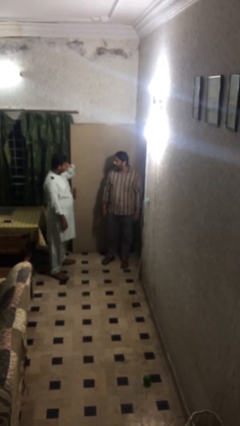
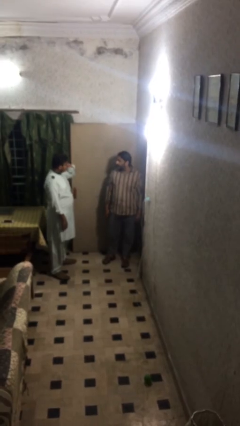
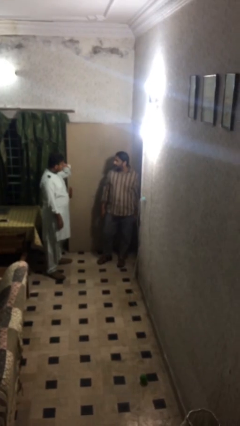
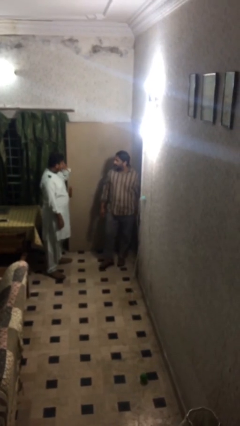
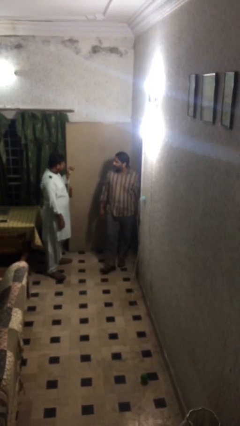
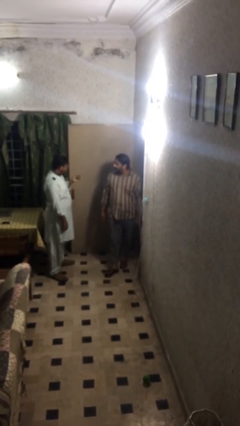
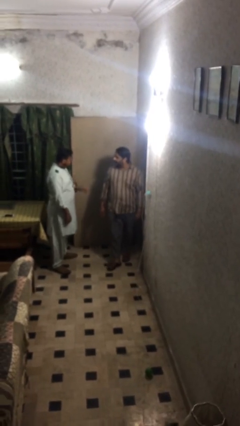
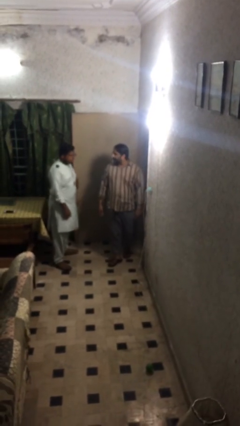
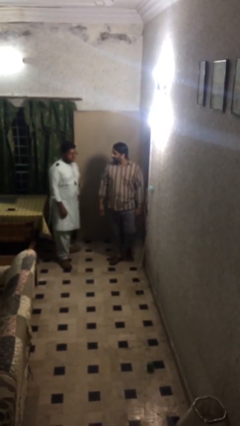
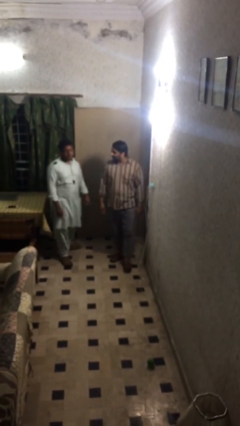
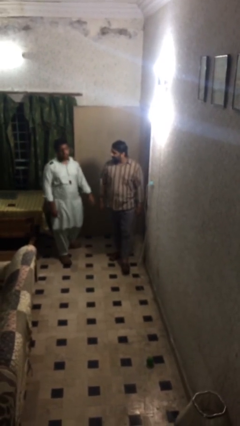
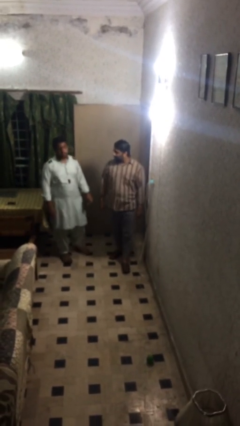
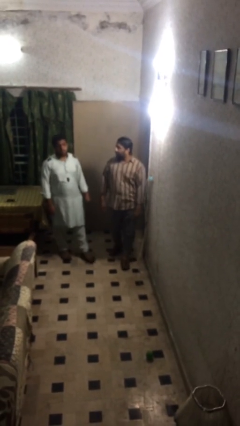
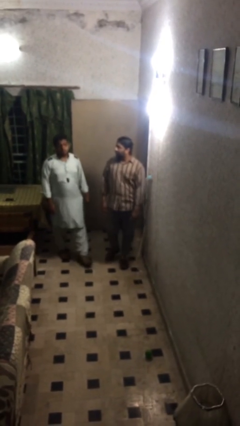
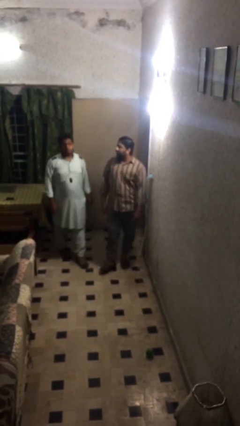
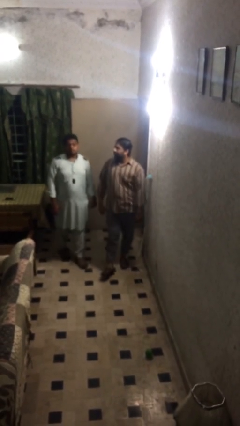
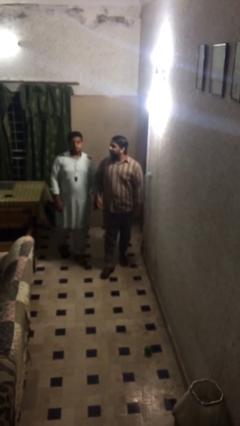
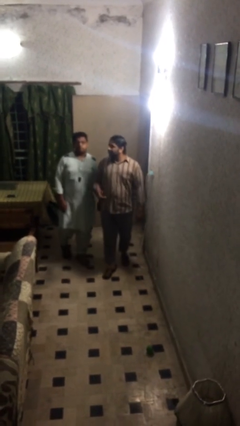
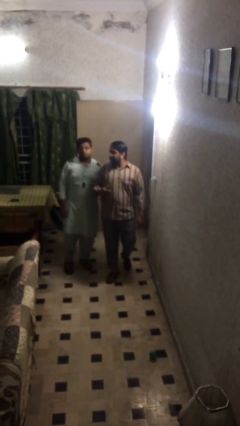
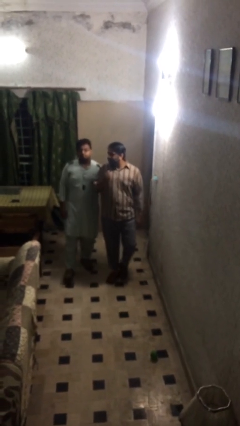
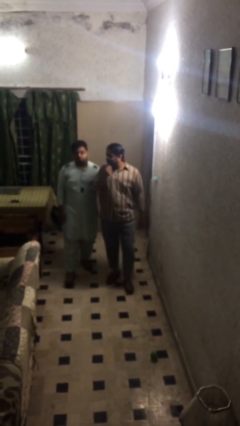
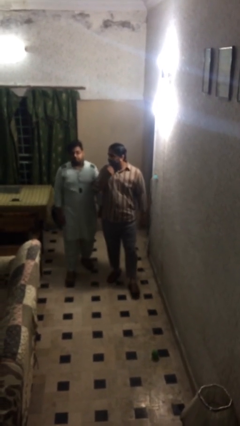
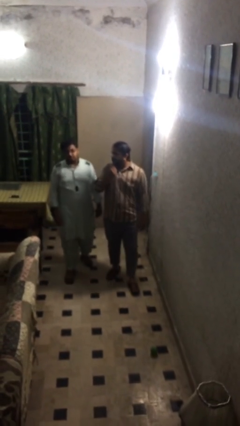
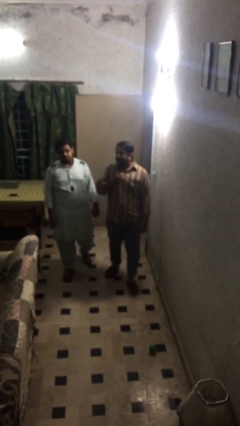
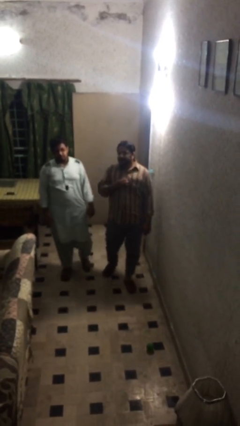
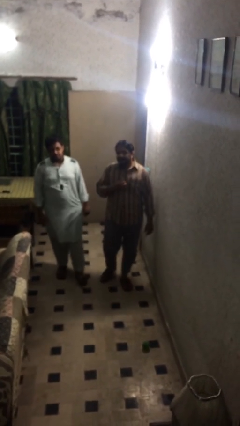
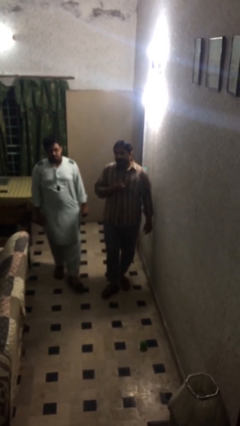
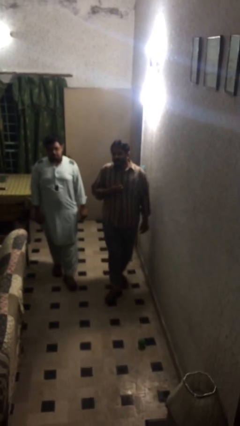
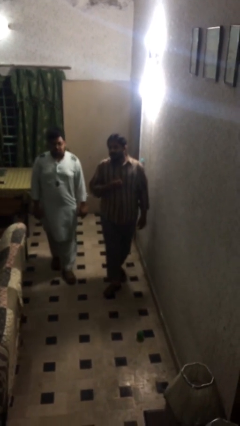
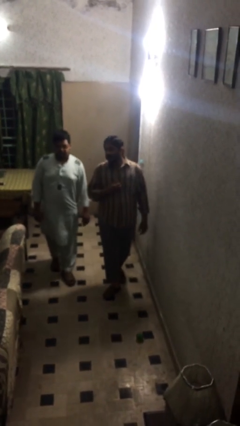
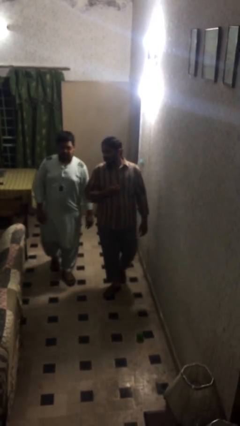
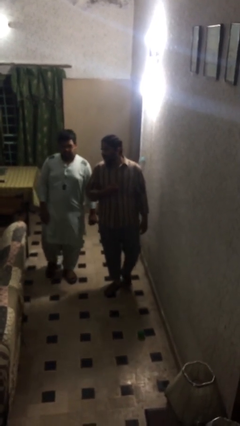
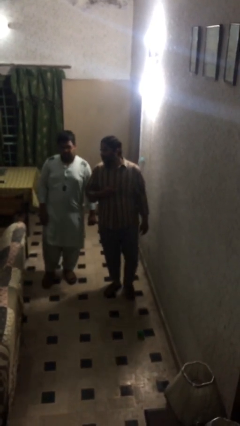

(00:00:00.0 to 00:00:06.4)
person talks to person

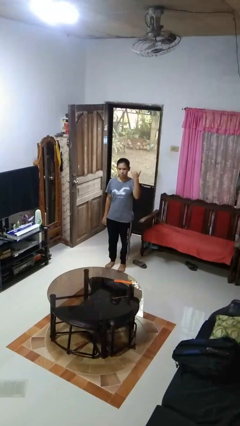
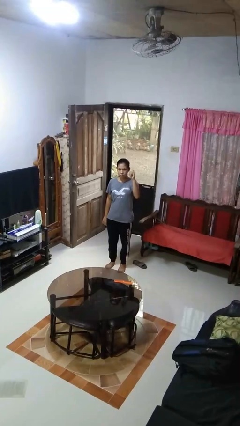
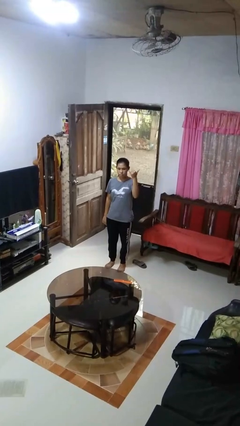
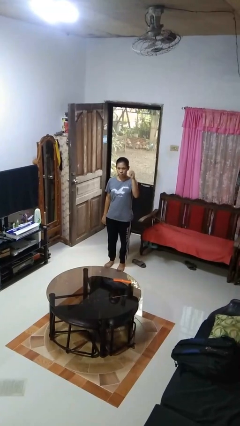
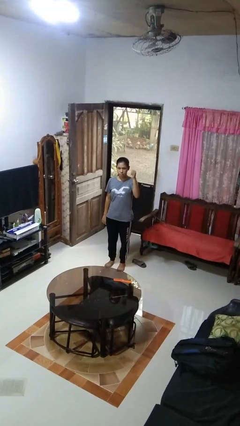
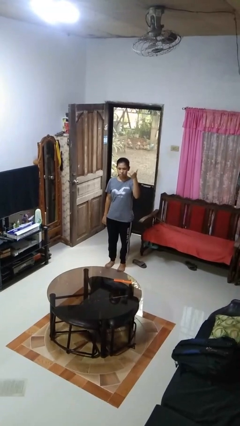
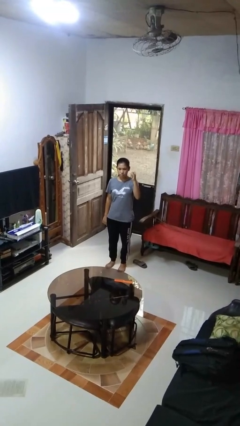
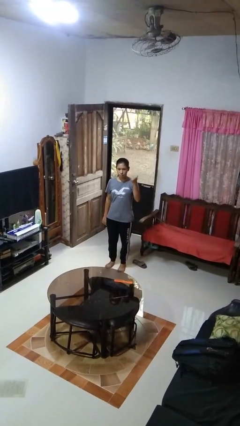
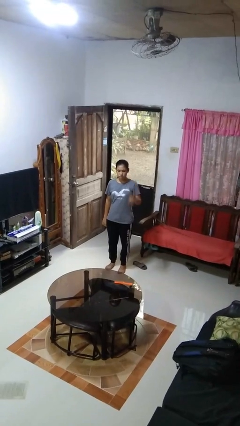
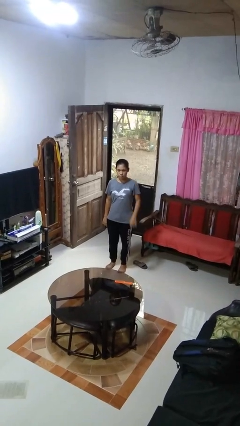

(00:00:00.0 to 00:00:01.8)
person gestures hang loose

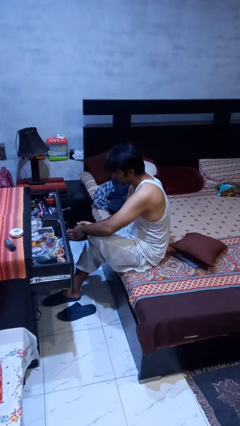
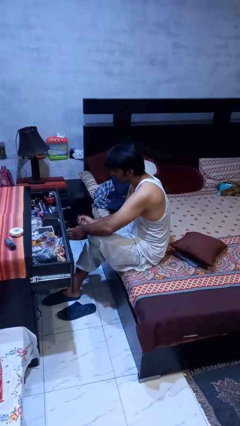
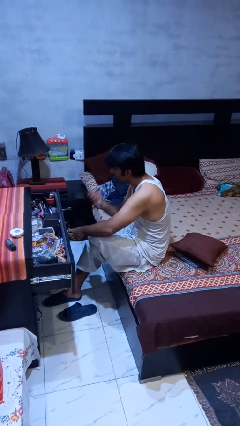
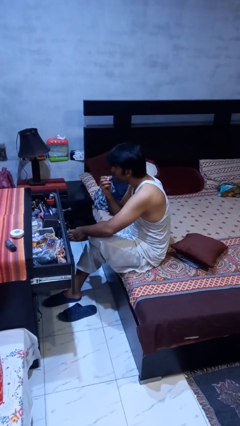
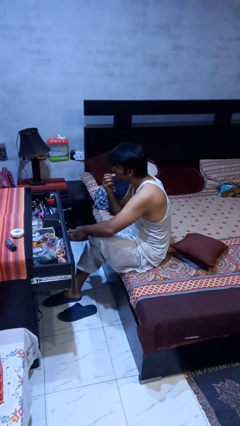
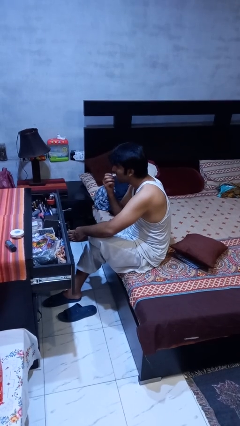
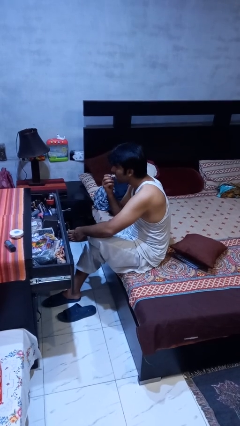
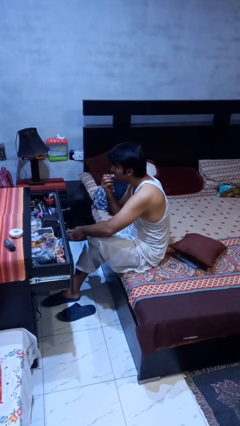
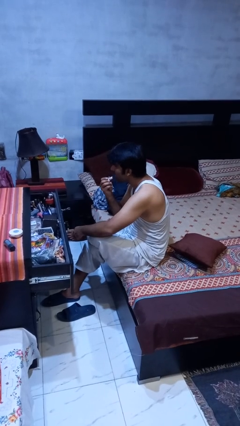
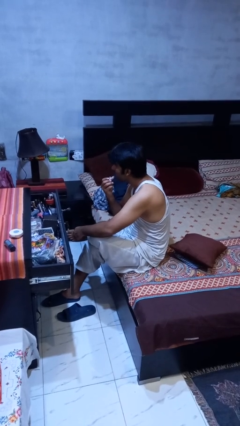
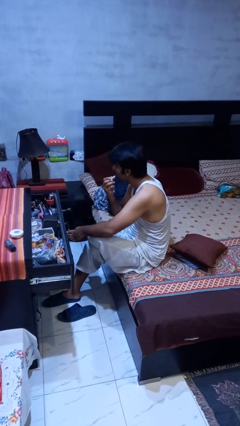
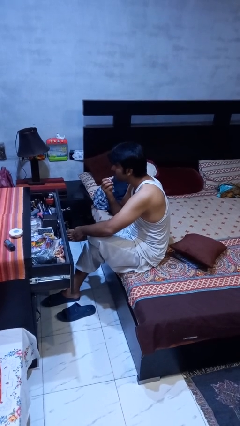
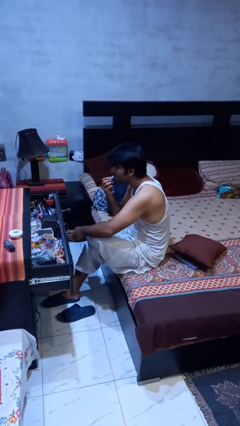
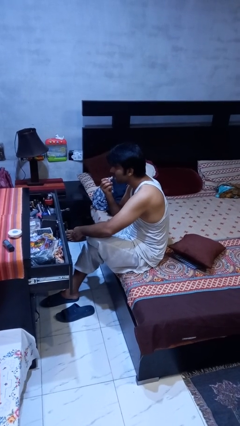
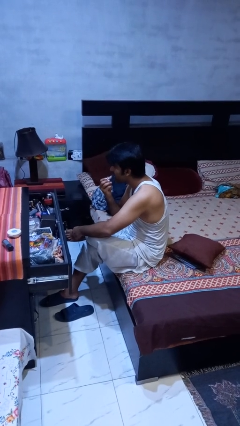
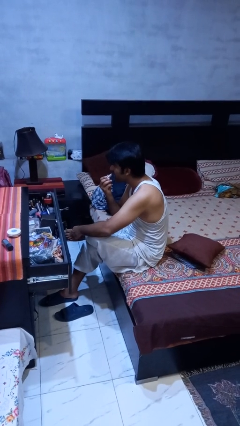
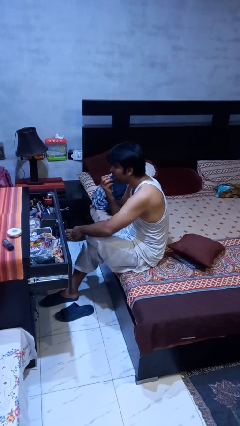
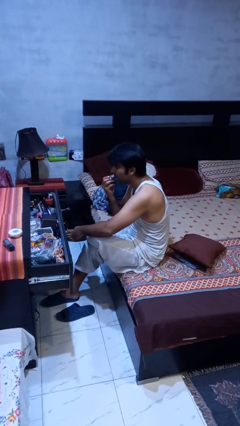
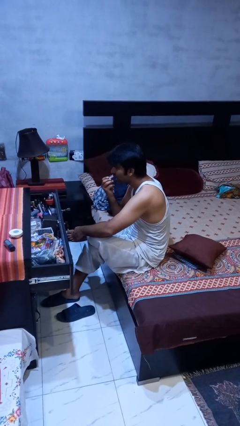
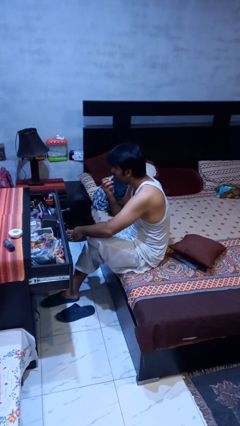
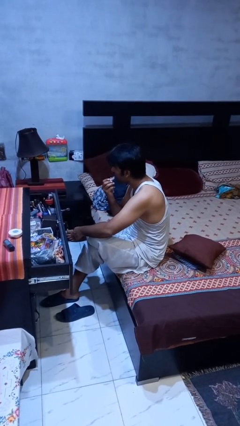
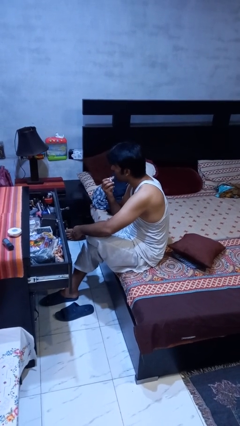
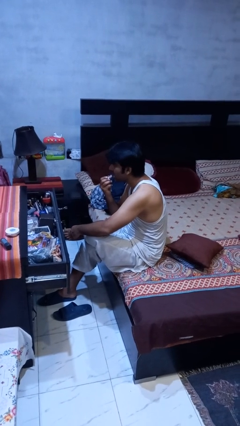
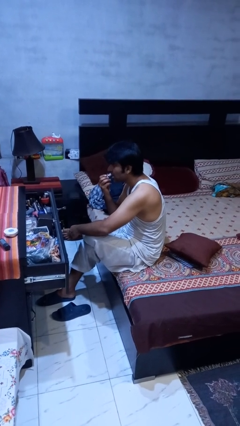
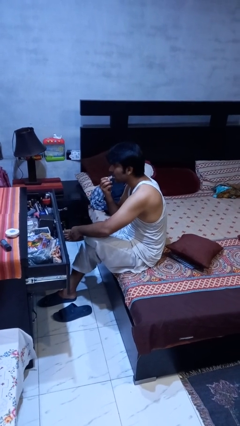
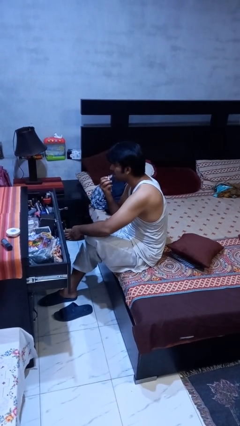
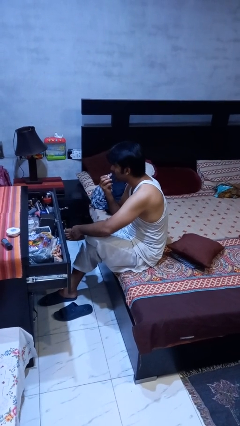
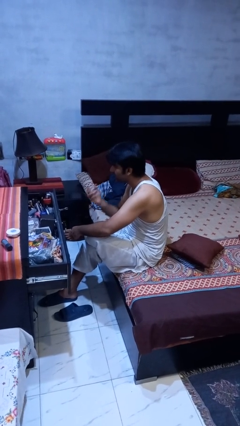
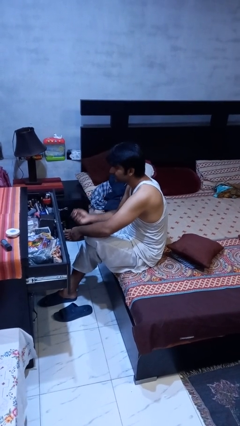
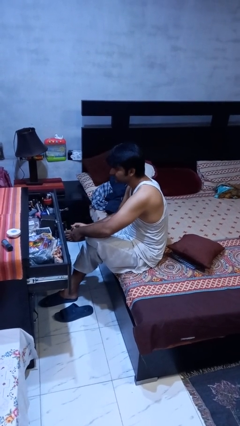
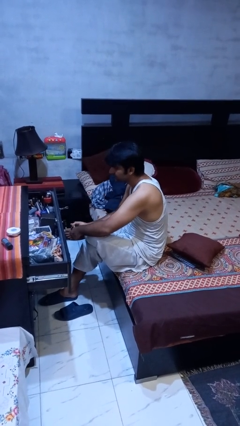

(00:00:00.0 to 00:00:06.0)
person applies lip makeup

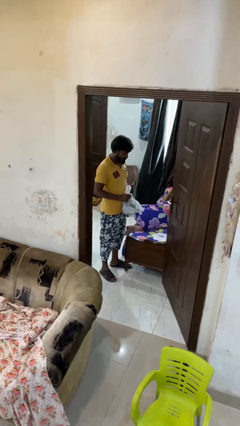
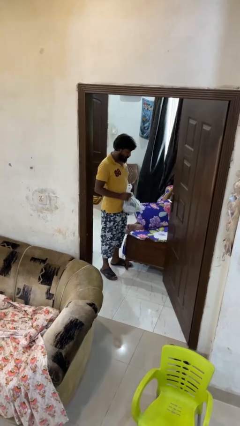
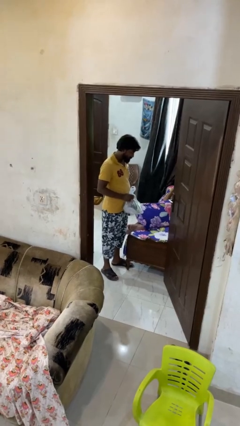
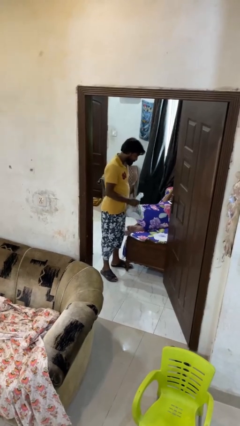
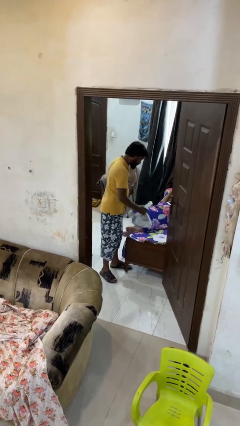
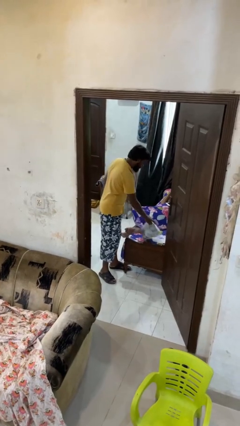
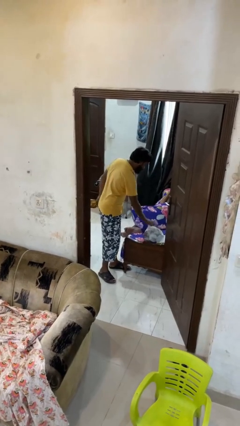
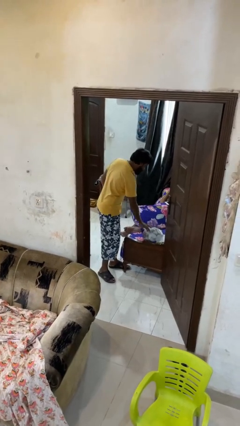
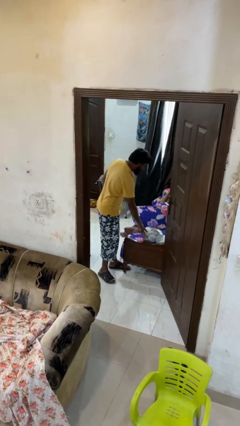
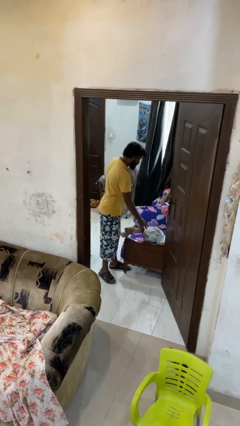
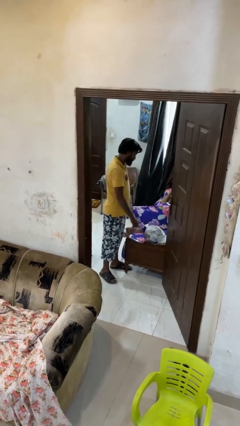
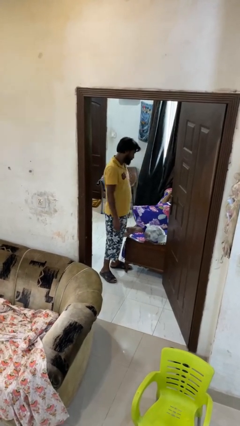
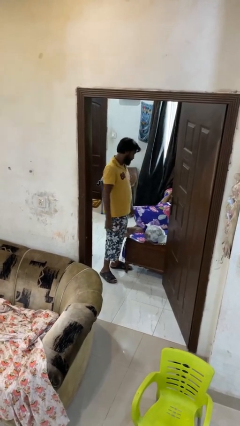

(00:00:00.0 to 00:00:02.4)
person puts down object on bed

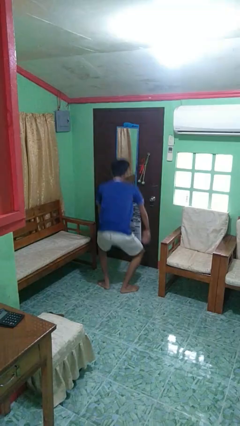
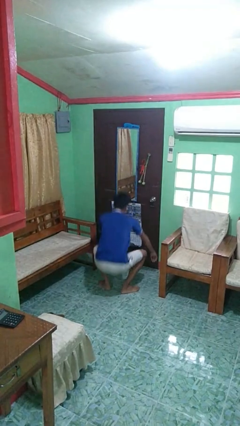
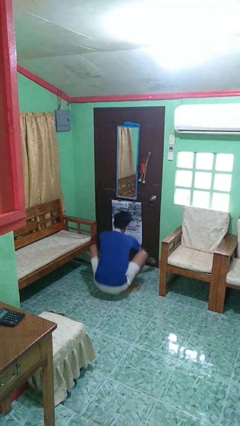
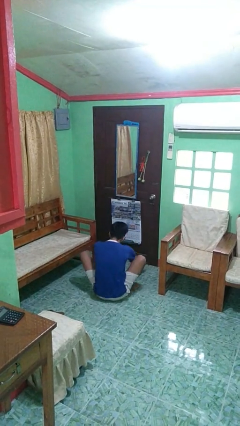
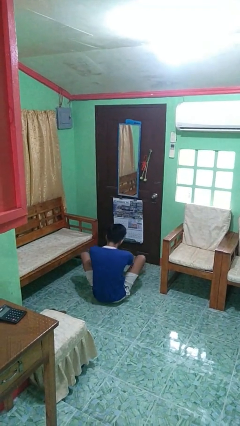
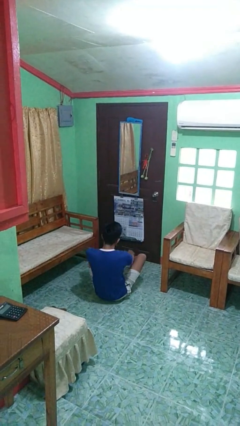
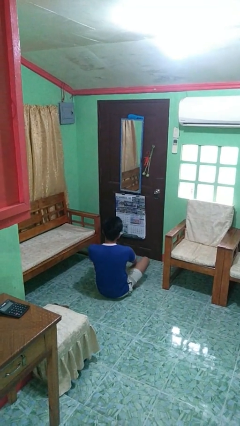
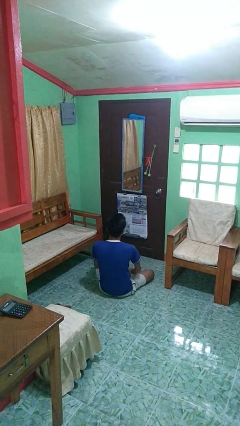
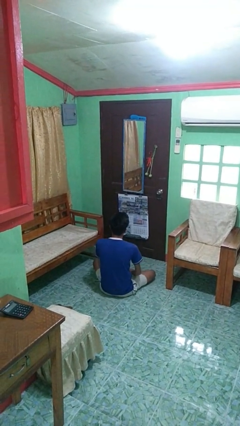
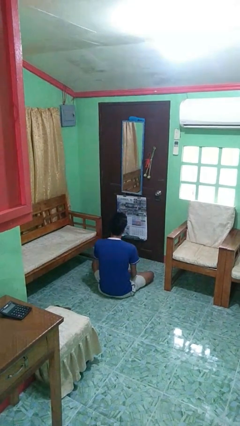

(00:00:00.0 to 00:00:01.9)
person squats
